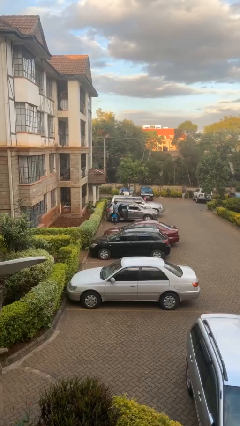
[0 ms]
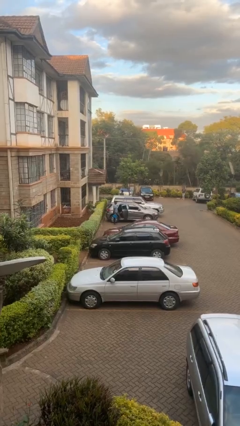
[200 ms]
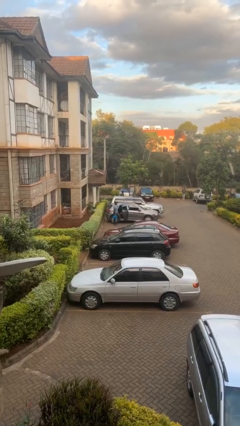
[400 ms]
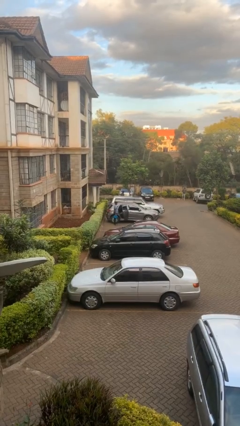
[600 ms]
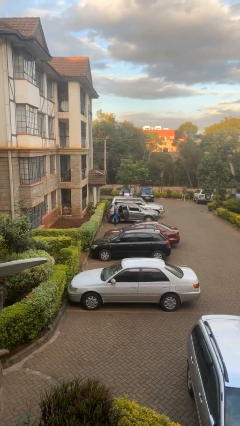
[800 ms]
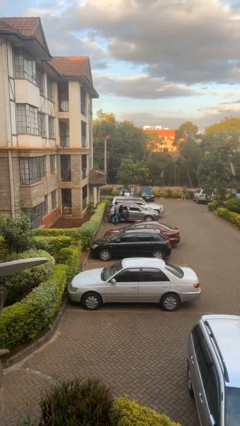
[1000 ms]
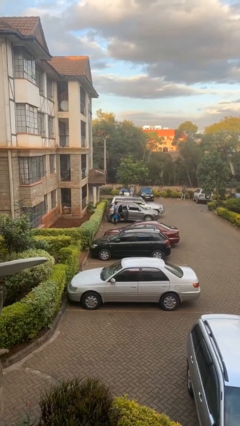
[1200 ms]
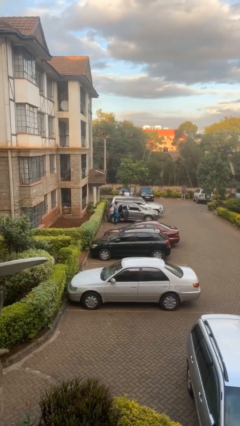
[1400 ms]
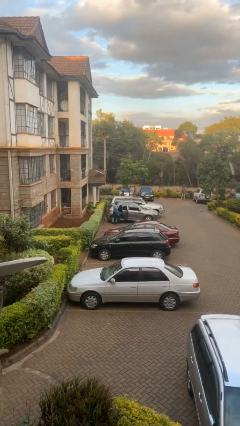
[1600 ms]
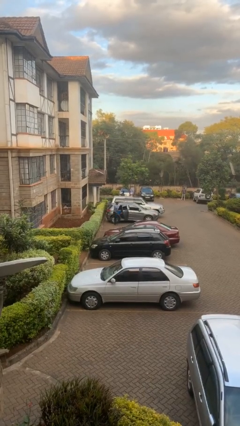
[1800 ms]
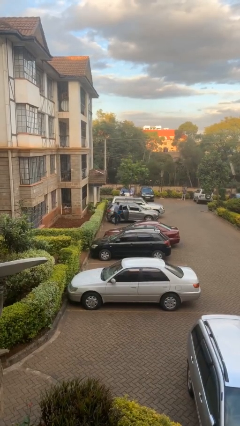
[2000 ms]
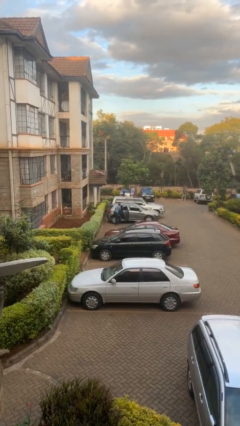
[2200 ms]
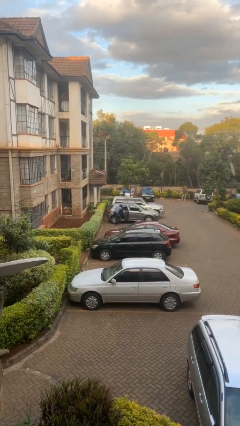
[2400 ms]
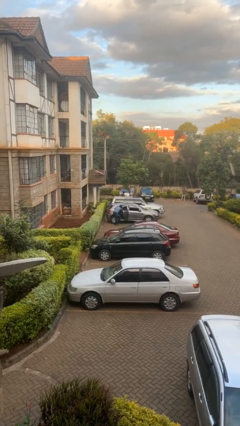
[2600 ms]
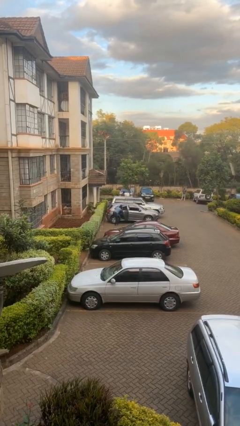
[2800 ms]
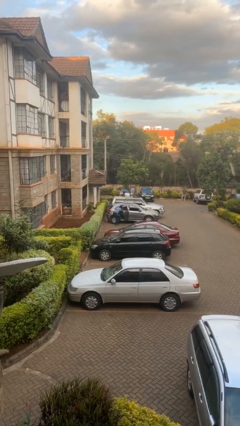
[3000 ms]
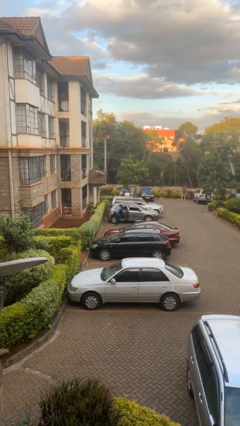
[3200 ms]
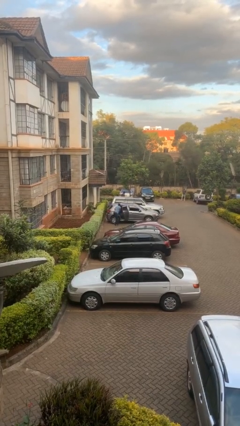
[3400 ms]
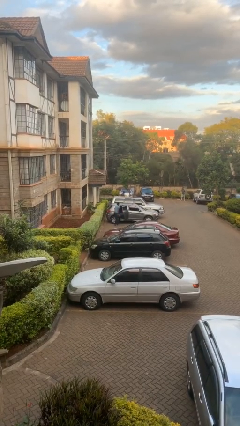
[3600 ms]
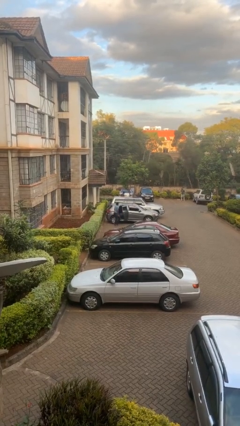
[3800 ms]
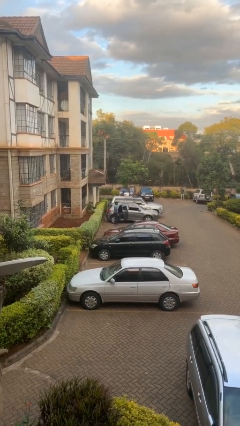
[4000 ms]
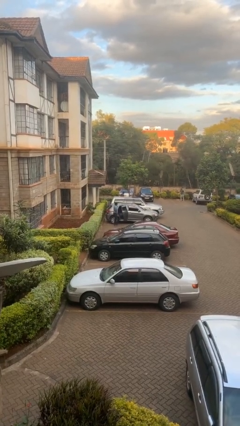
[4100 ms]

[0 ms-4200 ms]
person loads car

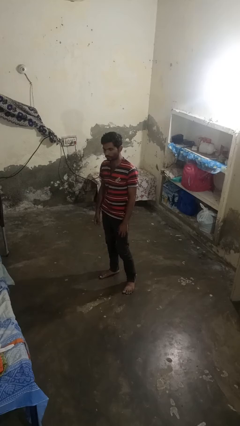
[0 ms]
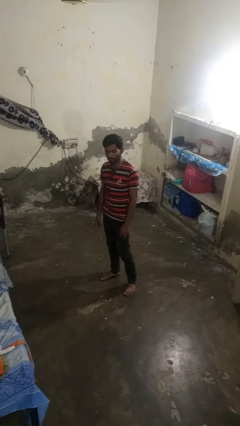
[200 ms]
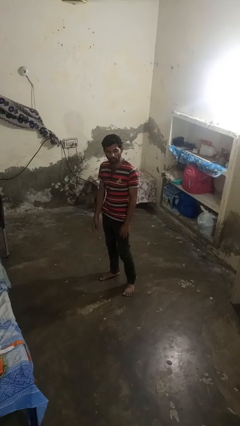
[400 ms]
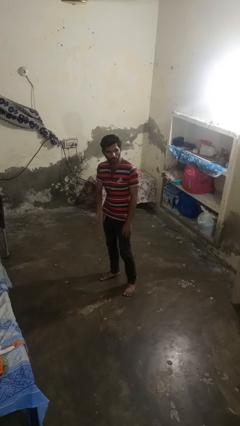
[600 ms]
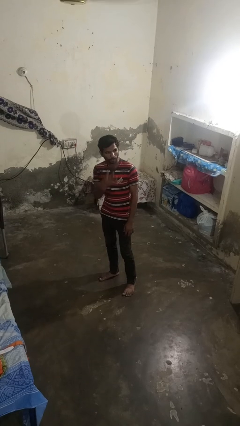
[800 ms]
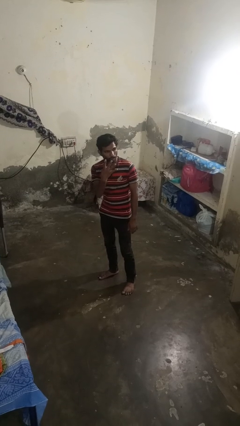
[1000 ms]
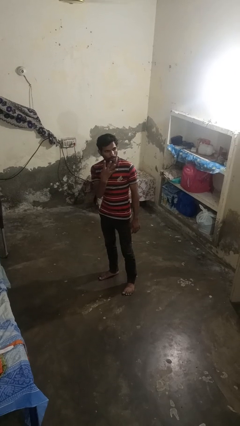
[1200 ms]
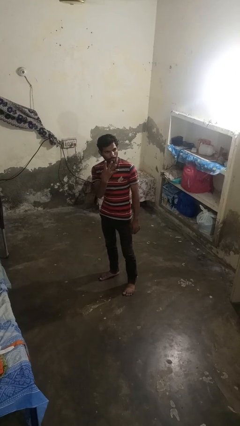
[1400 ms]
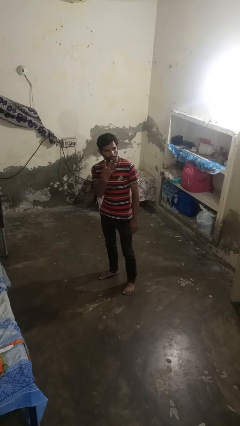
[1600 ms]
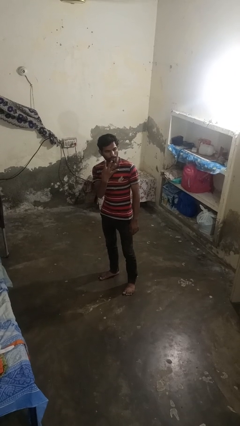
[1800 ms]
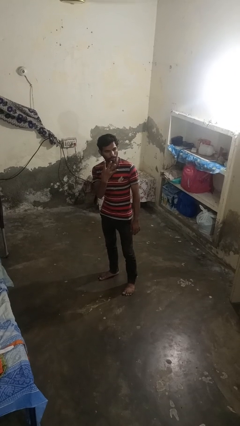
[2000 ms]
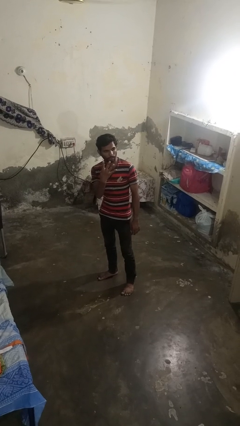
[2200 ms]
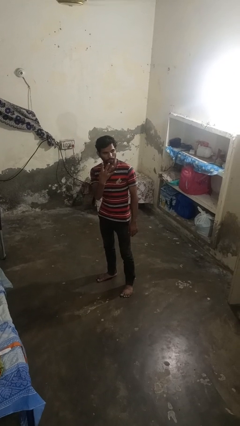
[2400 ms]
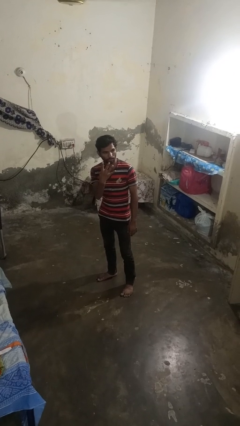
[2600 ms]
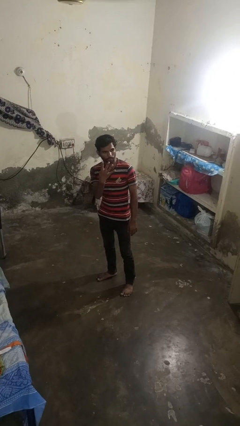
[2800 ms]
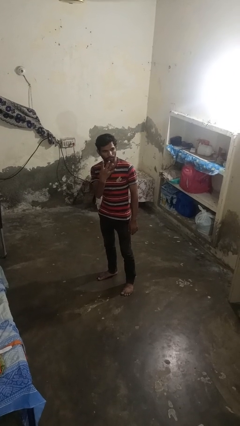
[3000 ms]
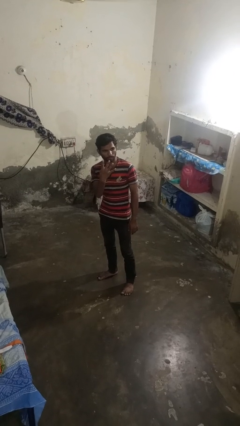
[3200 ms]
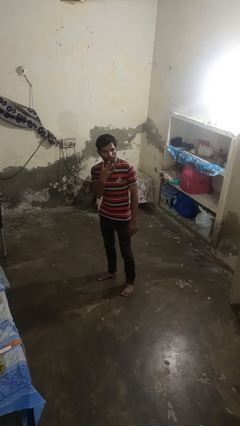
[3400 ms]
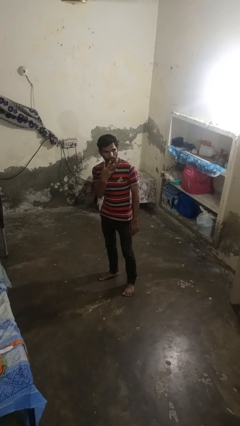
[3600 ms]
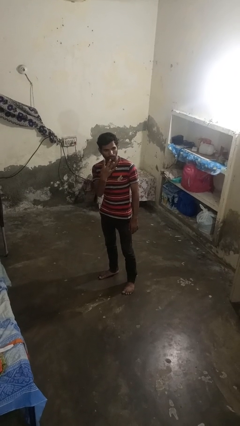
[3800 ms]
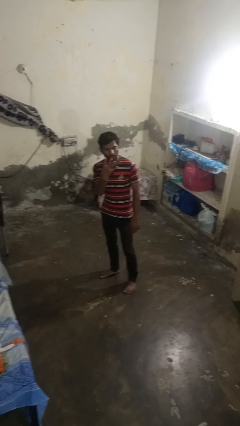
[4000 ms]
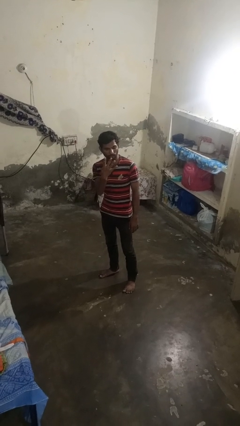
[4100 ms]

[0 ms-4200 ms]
person gestures number four

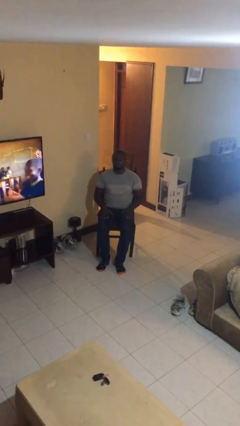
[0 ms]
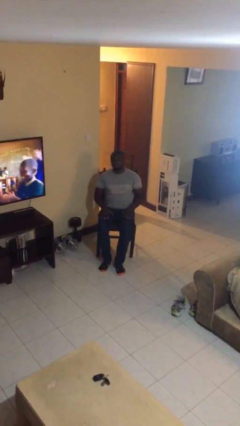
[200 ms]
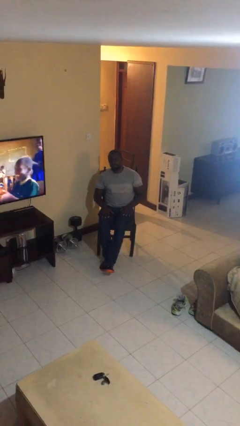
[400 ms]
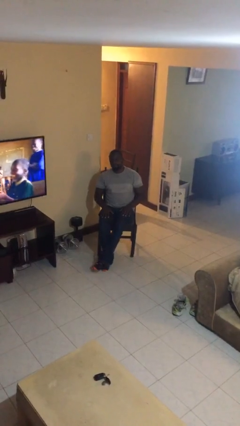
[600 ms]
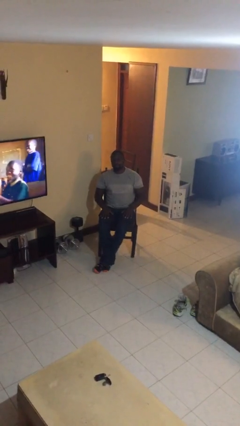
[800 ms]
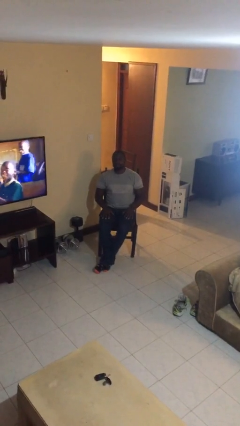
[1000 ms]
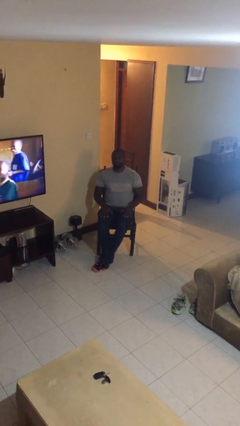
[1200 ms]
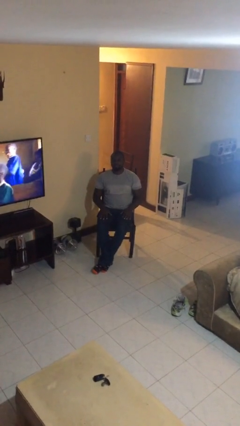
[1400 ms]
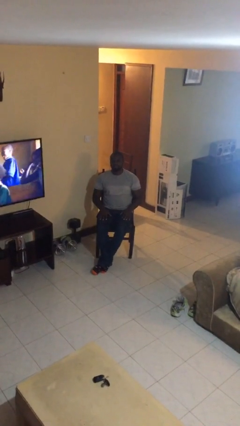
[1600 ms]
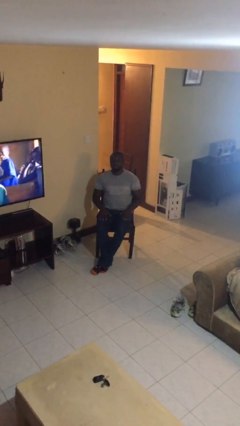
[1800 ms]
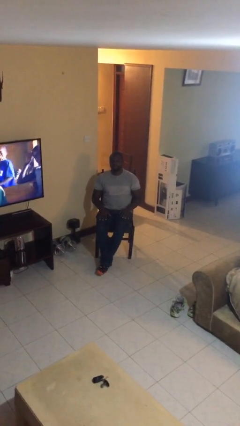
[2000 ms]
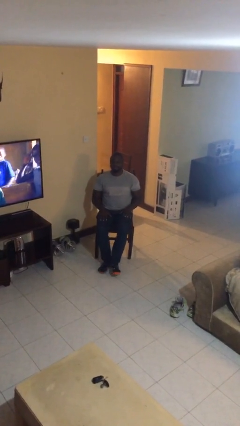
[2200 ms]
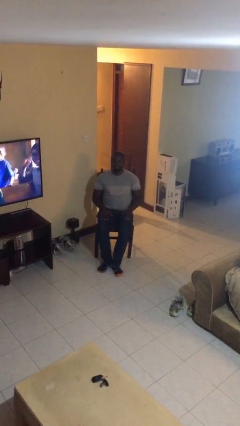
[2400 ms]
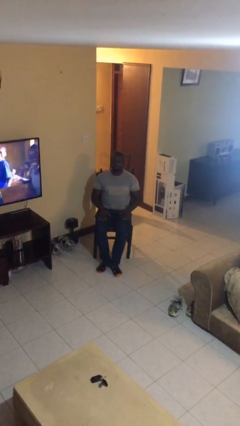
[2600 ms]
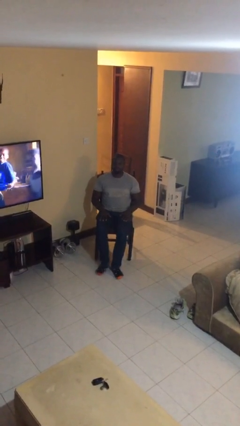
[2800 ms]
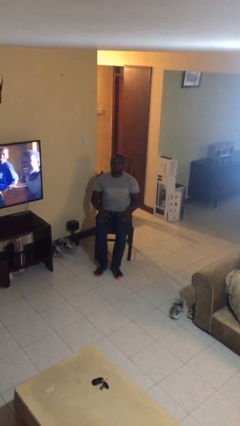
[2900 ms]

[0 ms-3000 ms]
person crosses legs

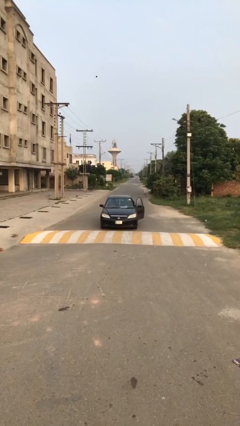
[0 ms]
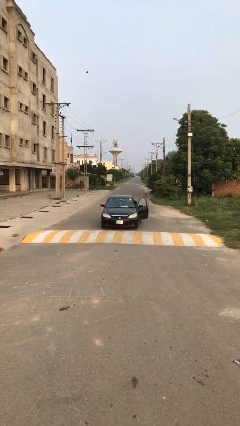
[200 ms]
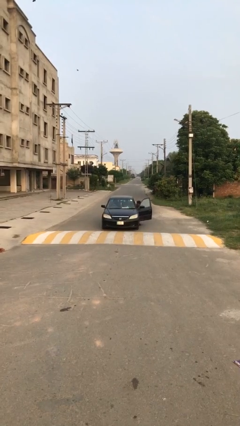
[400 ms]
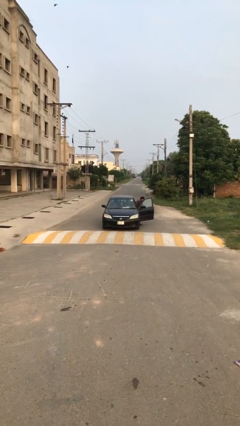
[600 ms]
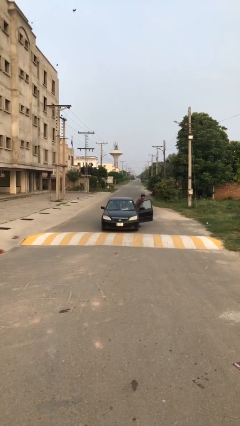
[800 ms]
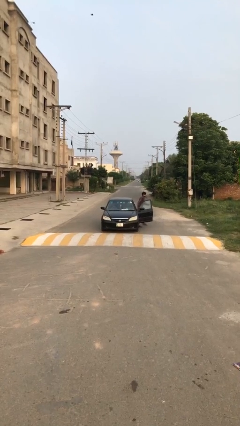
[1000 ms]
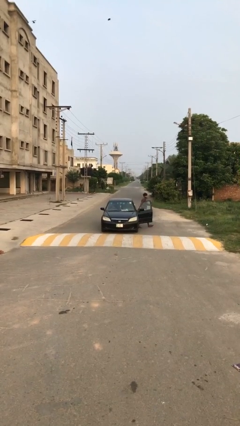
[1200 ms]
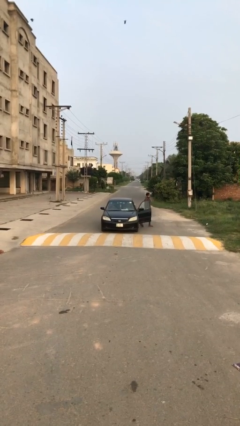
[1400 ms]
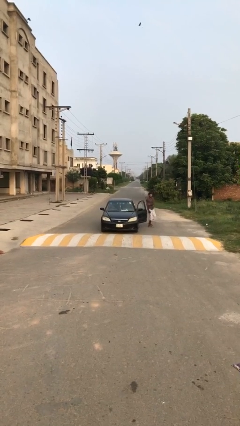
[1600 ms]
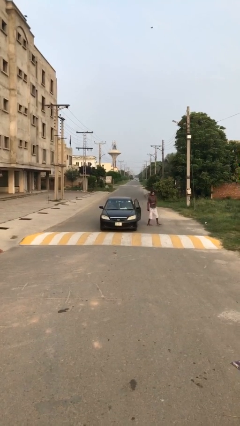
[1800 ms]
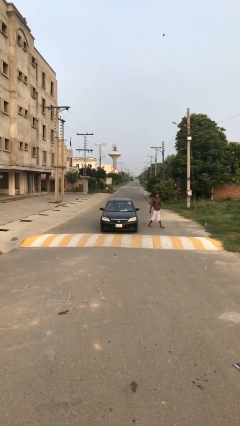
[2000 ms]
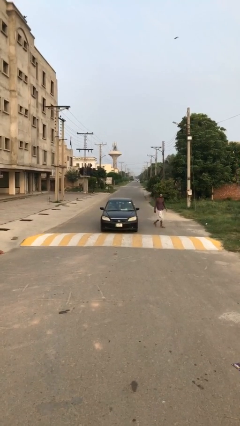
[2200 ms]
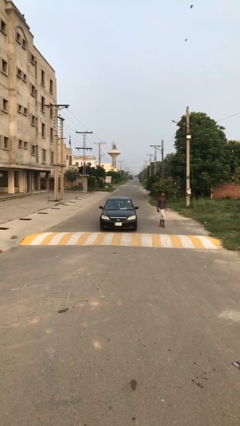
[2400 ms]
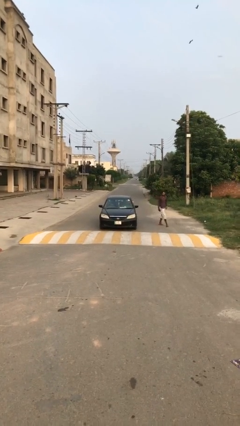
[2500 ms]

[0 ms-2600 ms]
car drops off person

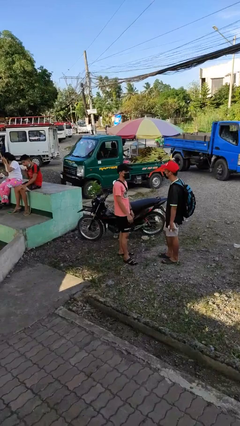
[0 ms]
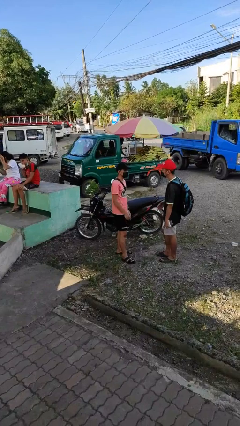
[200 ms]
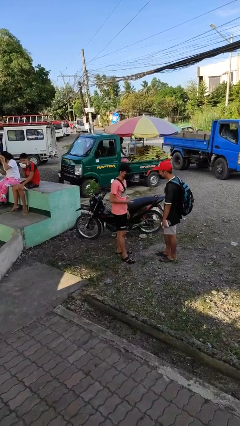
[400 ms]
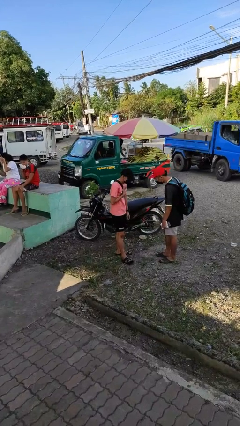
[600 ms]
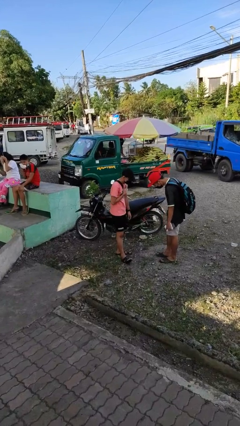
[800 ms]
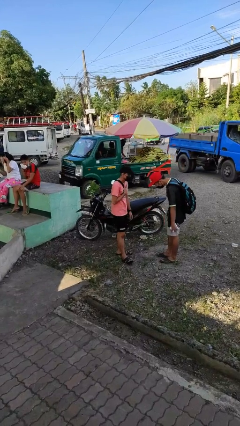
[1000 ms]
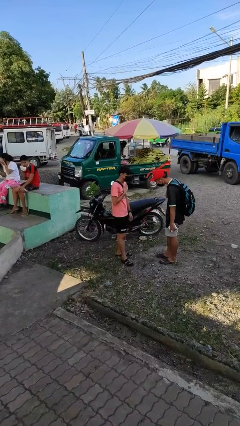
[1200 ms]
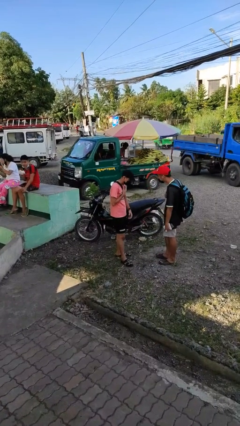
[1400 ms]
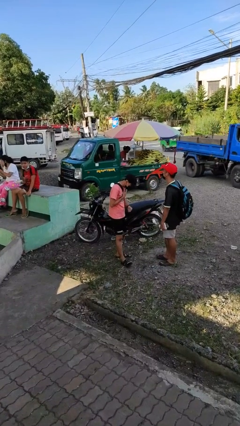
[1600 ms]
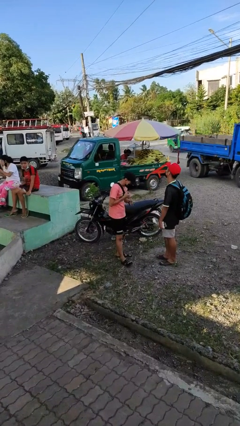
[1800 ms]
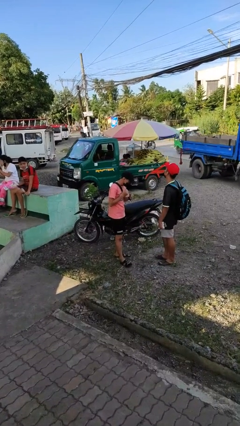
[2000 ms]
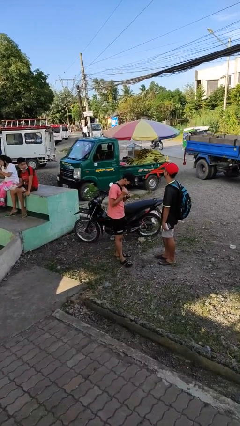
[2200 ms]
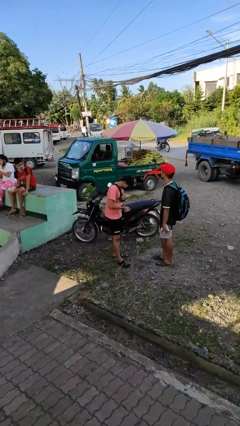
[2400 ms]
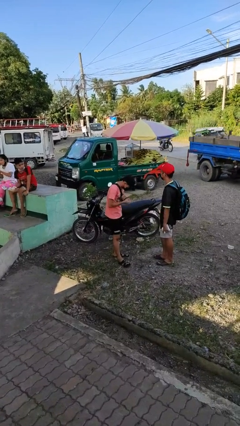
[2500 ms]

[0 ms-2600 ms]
person laughs with person

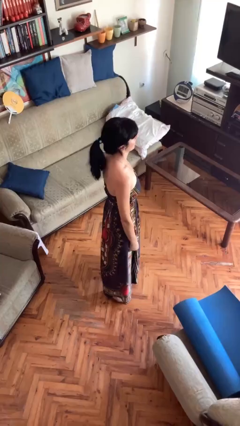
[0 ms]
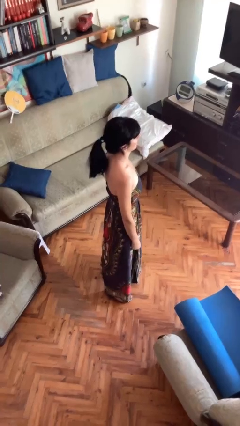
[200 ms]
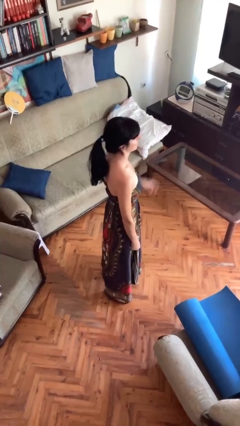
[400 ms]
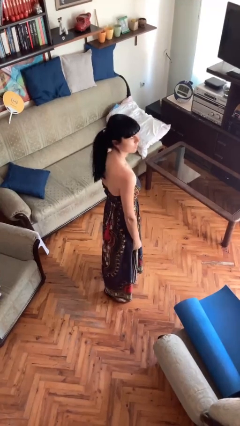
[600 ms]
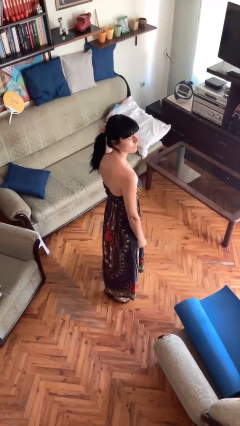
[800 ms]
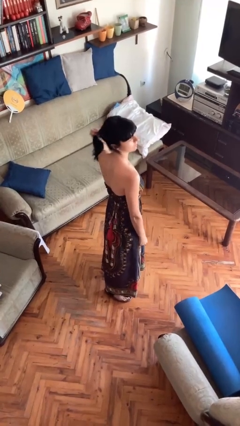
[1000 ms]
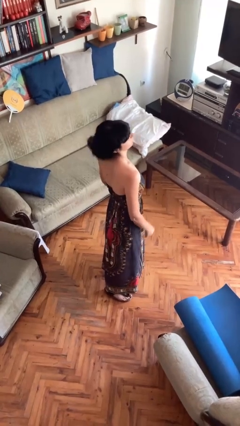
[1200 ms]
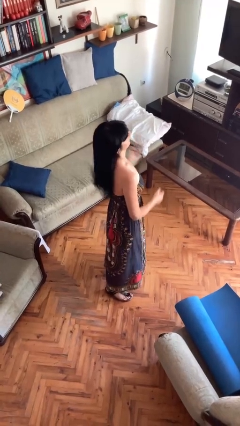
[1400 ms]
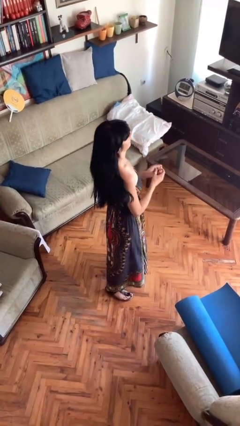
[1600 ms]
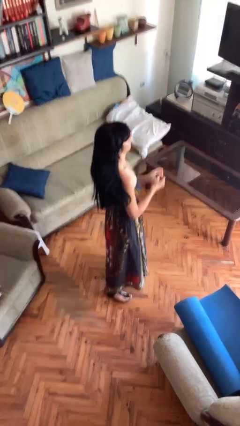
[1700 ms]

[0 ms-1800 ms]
person takes off hairtie
